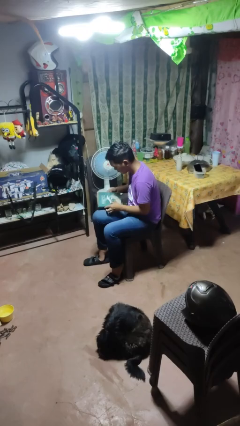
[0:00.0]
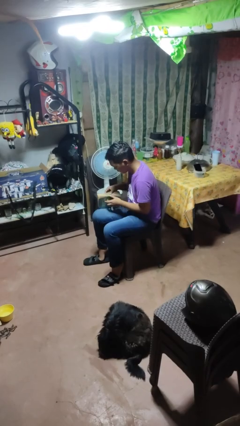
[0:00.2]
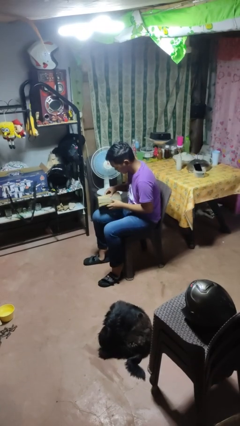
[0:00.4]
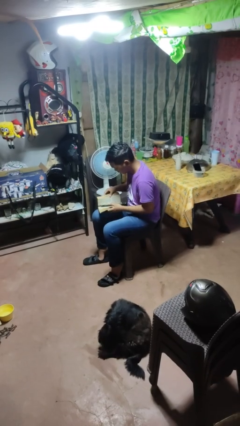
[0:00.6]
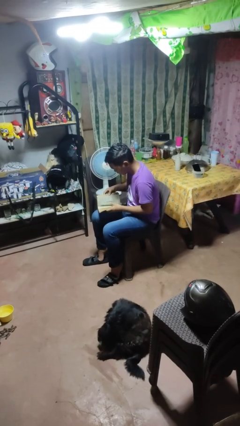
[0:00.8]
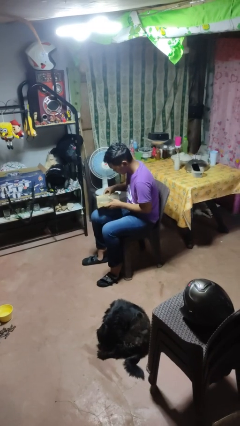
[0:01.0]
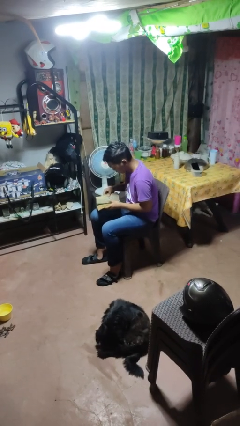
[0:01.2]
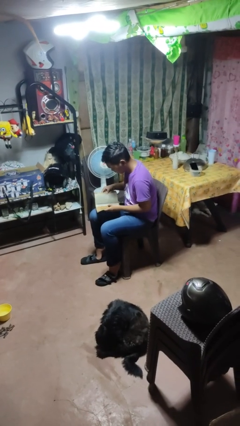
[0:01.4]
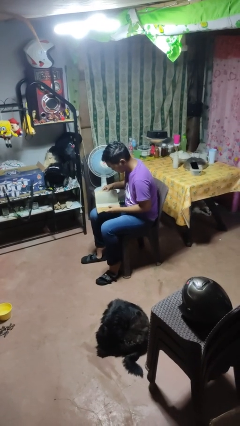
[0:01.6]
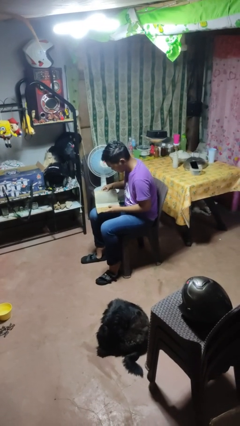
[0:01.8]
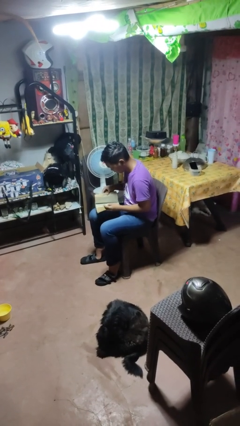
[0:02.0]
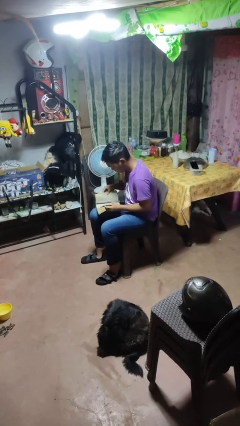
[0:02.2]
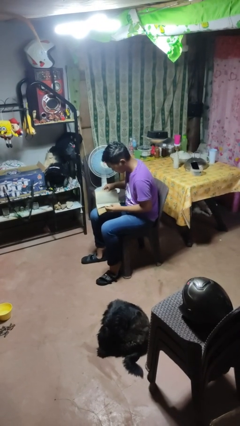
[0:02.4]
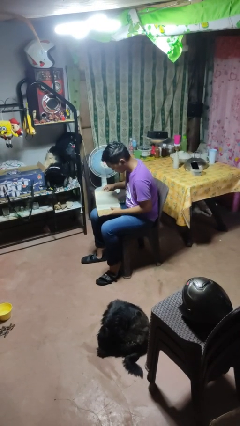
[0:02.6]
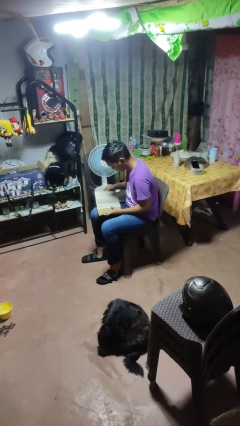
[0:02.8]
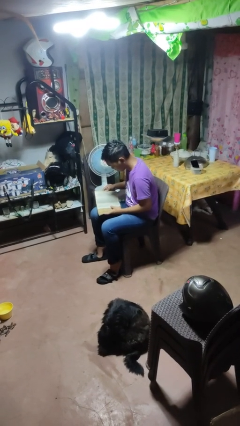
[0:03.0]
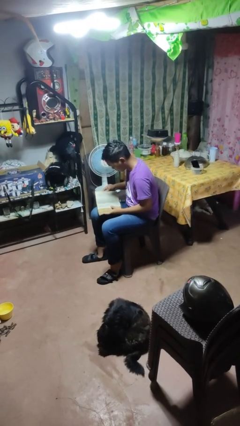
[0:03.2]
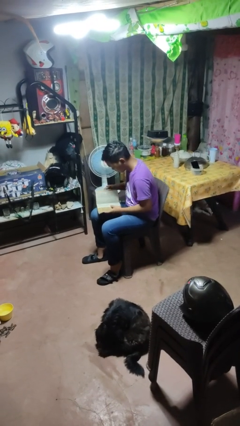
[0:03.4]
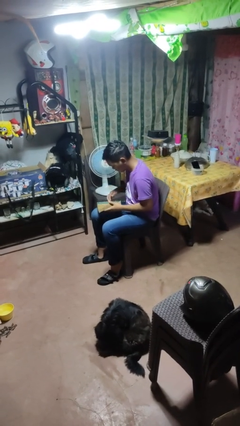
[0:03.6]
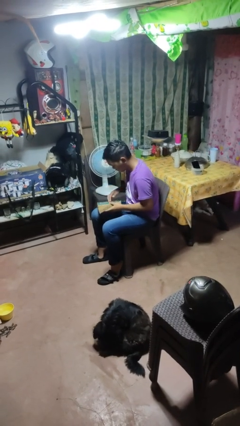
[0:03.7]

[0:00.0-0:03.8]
person reads book

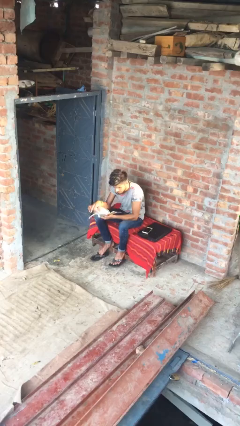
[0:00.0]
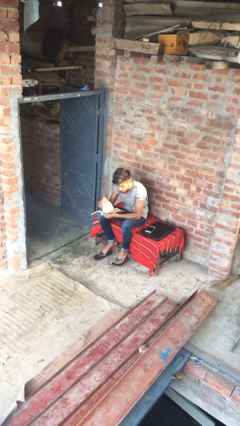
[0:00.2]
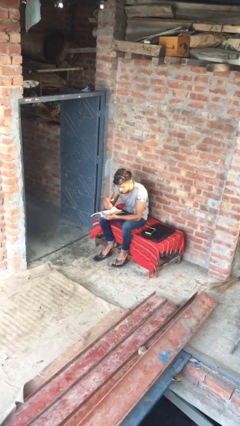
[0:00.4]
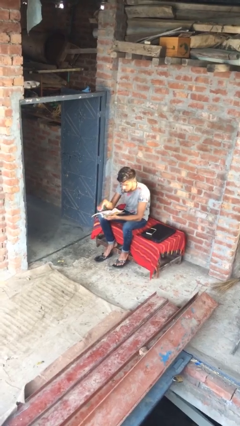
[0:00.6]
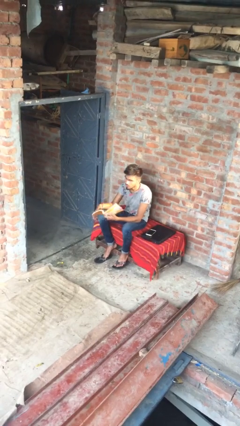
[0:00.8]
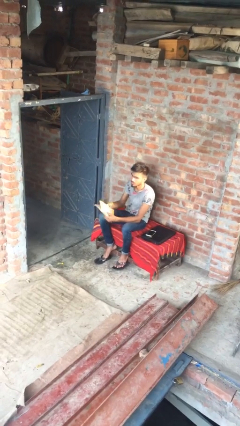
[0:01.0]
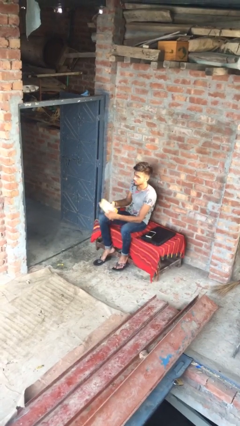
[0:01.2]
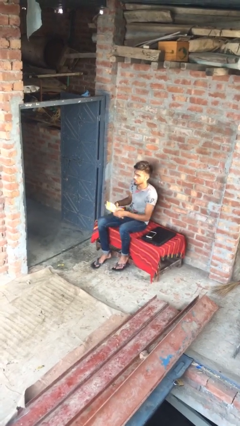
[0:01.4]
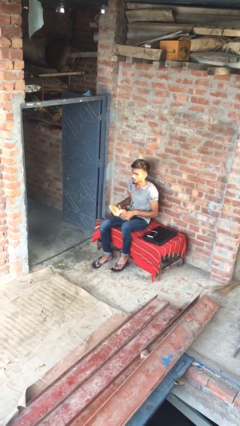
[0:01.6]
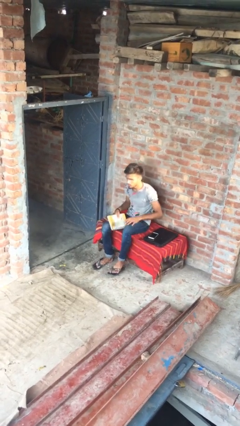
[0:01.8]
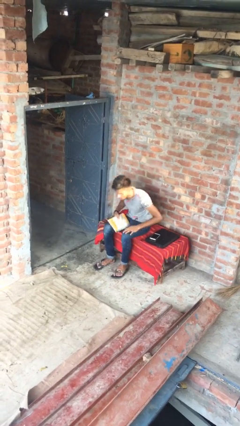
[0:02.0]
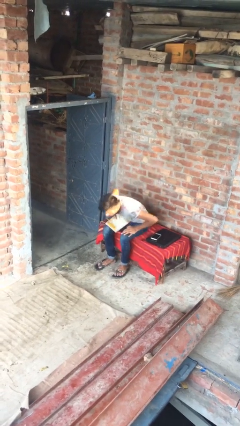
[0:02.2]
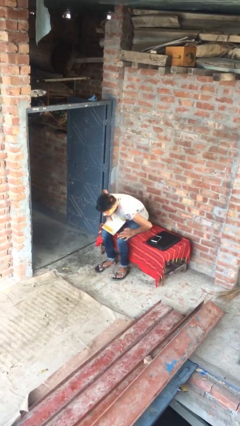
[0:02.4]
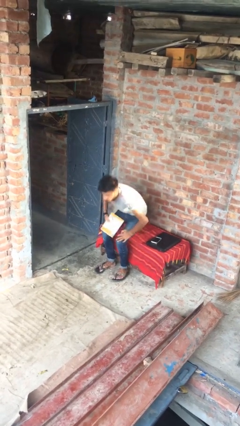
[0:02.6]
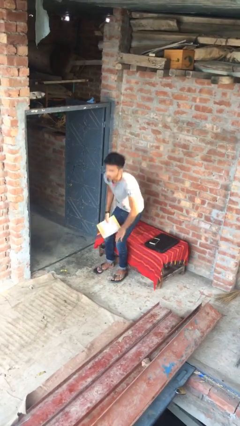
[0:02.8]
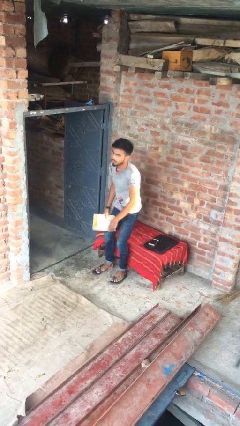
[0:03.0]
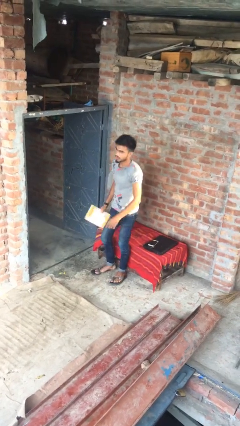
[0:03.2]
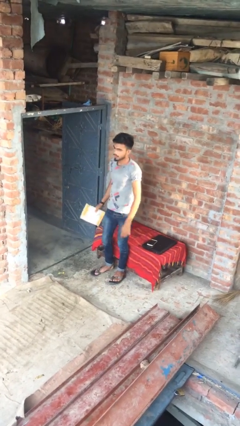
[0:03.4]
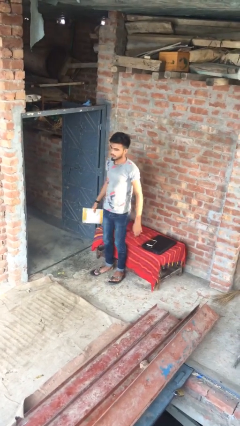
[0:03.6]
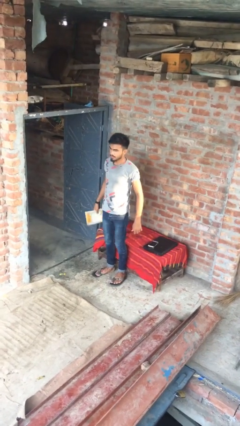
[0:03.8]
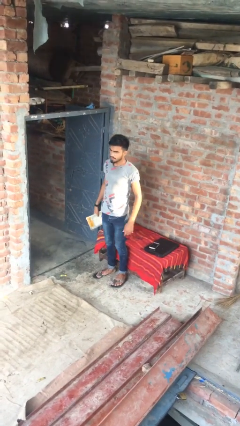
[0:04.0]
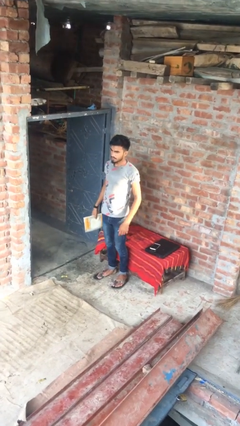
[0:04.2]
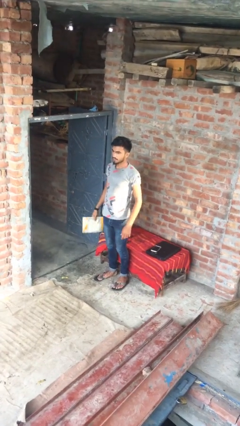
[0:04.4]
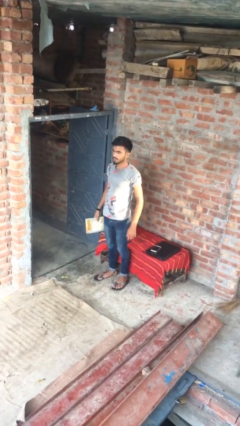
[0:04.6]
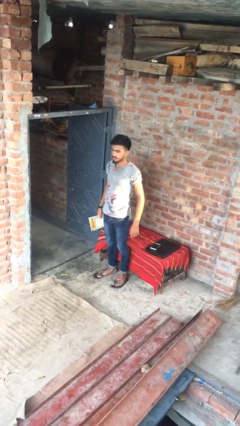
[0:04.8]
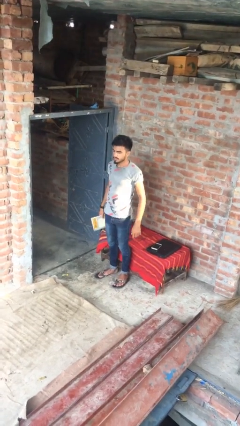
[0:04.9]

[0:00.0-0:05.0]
person stands up

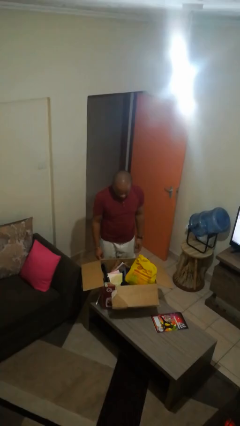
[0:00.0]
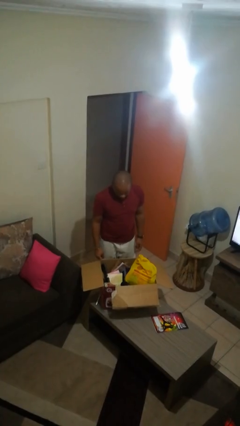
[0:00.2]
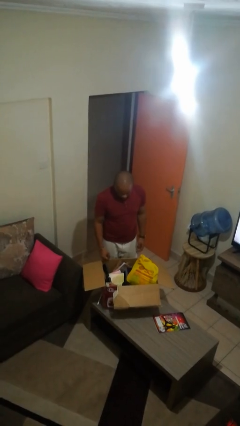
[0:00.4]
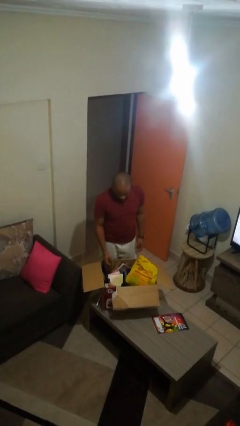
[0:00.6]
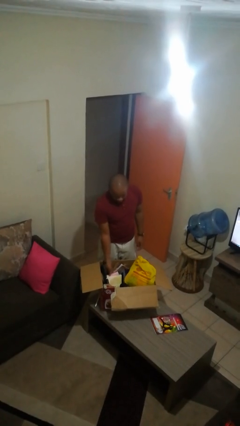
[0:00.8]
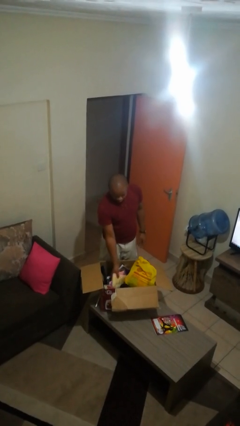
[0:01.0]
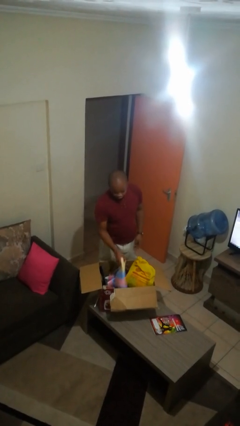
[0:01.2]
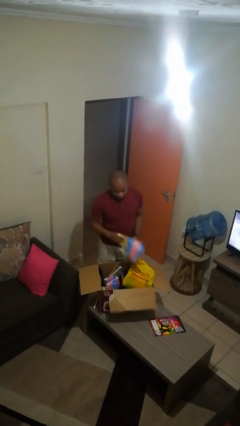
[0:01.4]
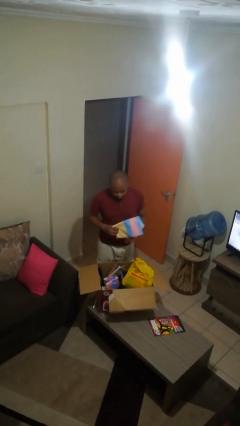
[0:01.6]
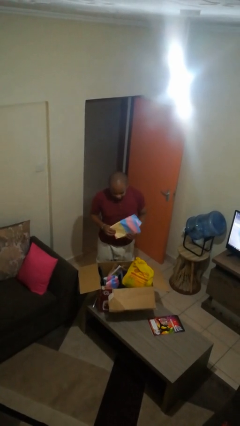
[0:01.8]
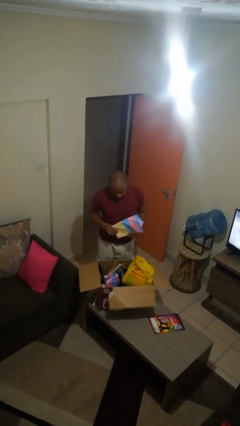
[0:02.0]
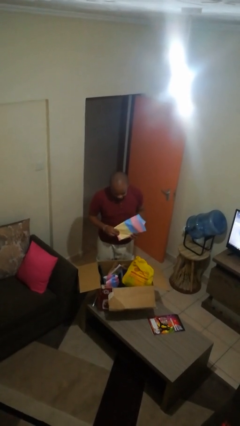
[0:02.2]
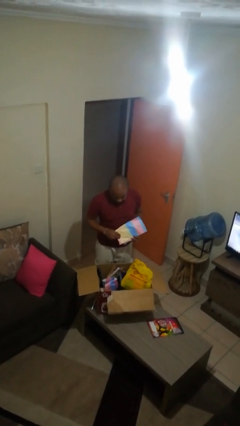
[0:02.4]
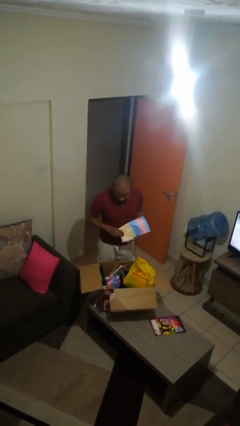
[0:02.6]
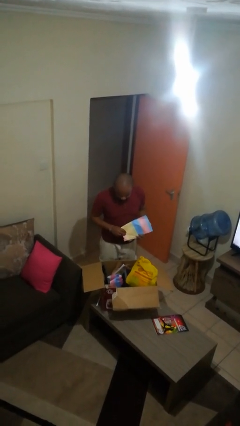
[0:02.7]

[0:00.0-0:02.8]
person takes object from box

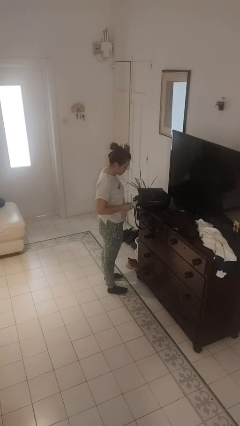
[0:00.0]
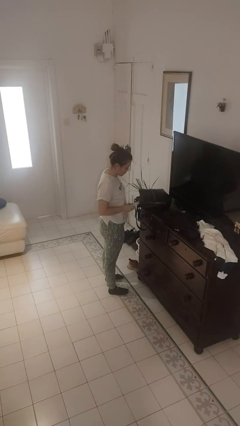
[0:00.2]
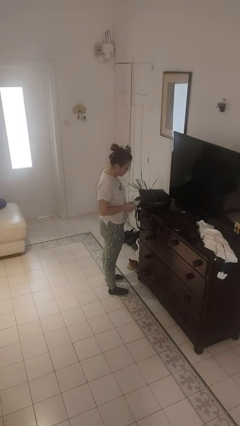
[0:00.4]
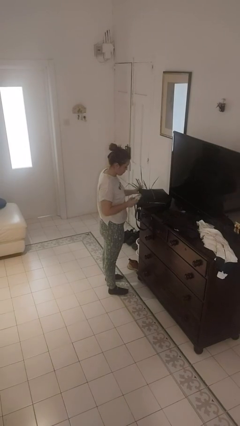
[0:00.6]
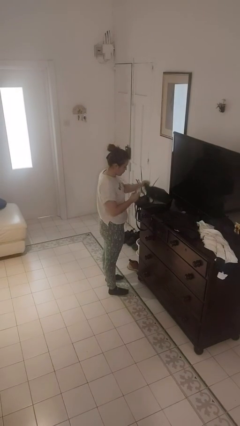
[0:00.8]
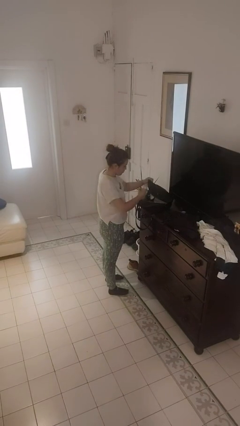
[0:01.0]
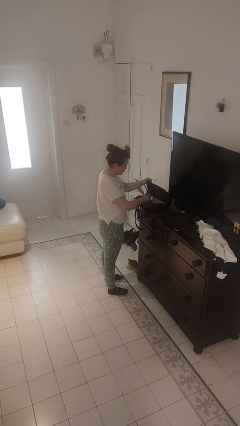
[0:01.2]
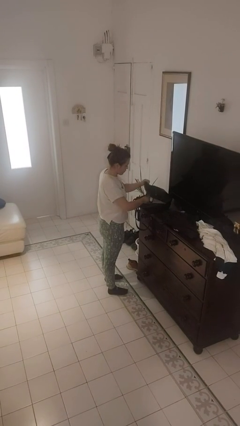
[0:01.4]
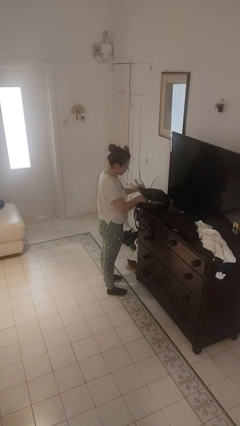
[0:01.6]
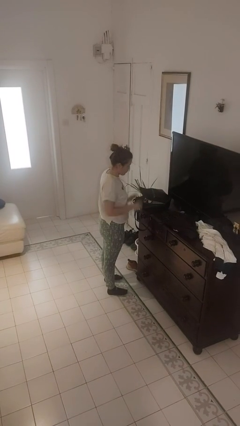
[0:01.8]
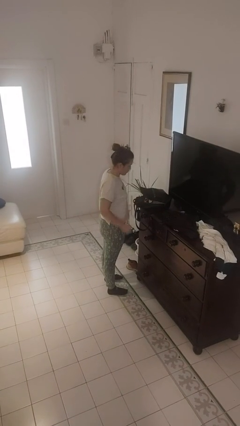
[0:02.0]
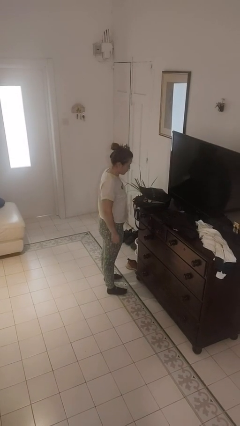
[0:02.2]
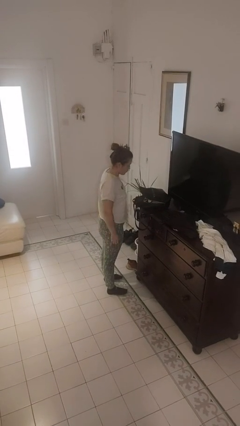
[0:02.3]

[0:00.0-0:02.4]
person puts object into purse

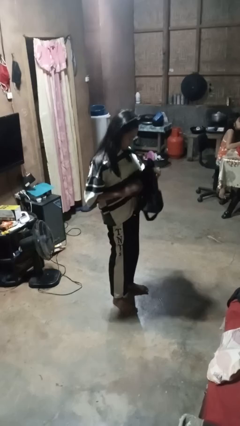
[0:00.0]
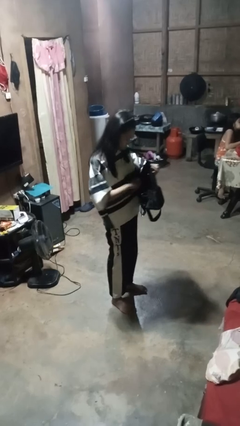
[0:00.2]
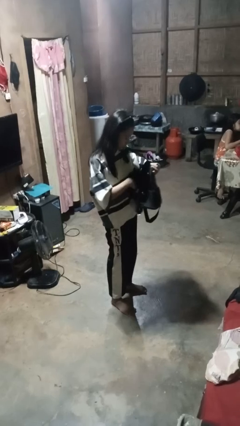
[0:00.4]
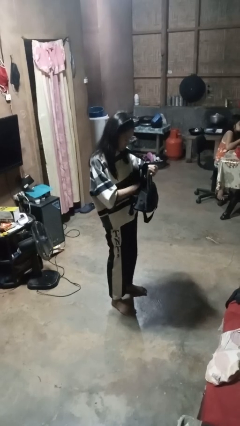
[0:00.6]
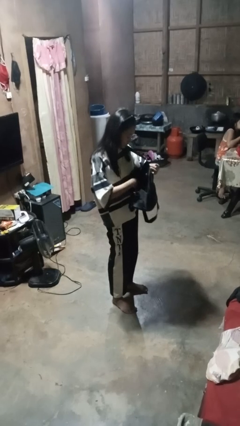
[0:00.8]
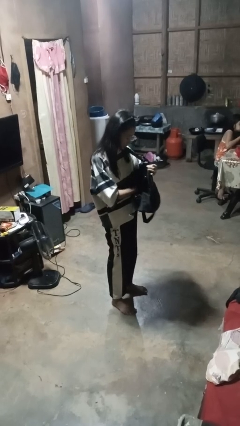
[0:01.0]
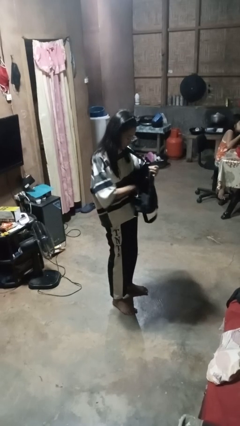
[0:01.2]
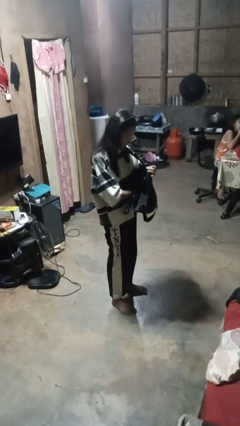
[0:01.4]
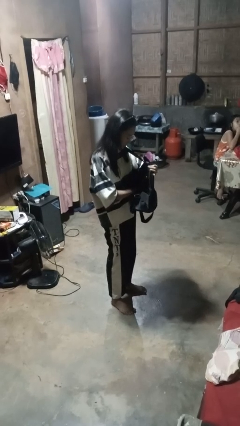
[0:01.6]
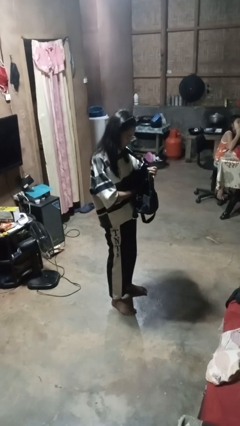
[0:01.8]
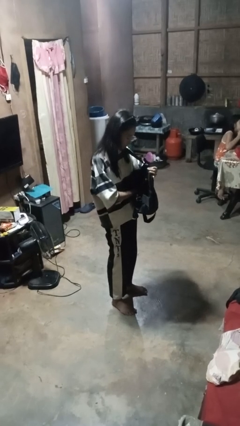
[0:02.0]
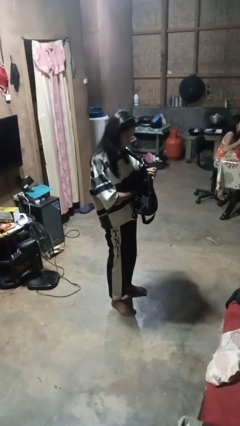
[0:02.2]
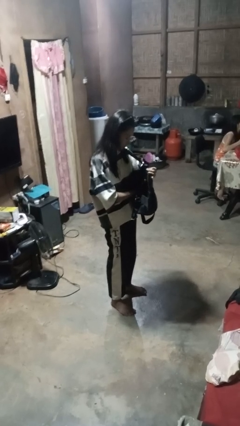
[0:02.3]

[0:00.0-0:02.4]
person searches in backpack

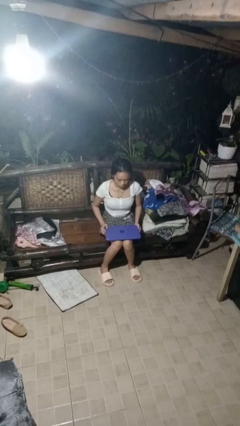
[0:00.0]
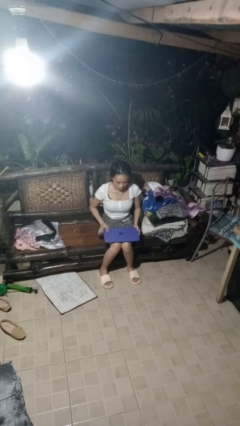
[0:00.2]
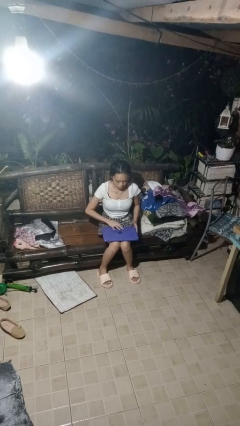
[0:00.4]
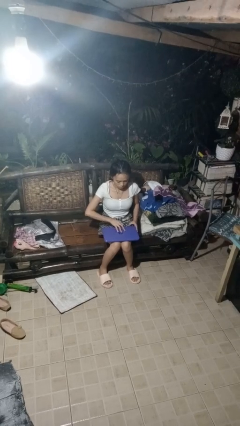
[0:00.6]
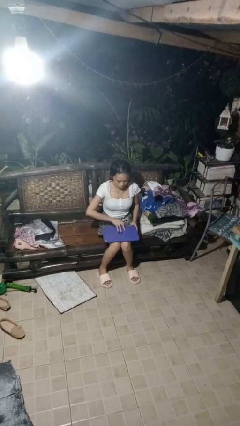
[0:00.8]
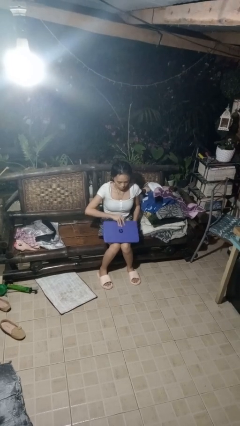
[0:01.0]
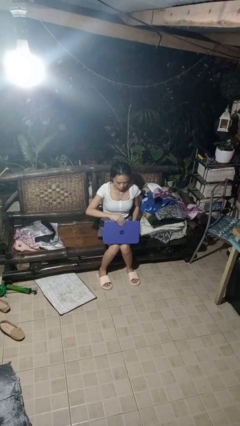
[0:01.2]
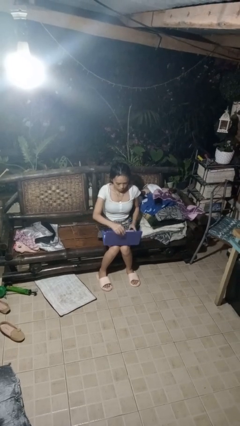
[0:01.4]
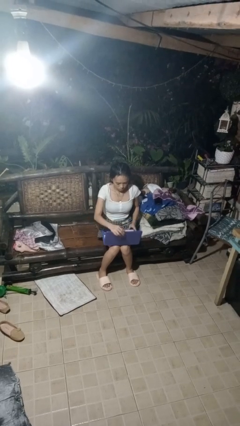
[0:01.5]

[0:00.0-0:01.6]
person opens laptop
